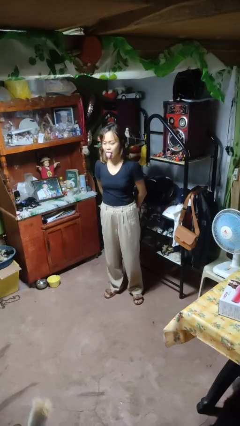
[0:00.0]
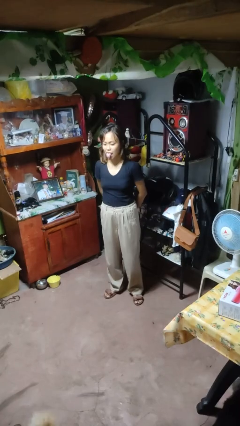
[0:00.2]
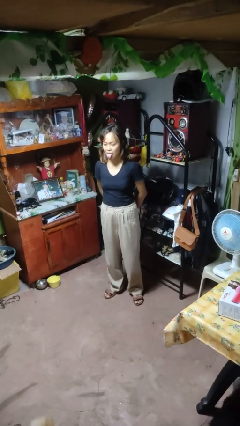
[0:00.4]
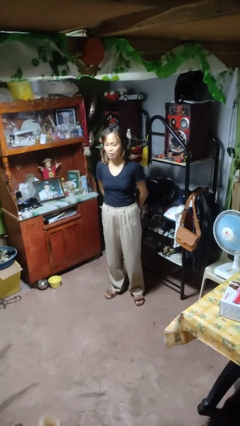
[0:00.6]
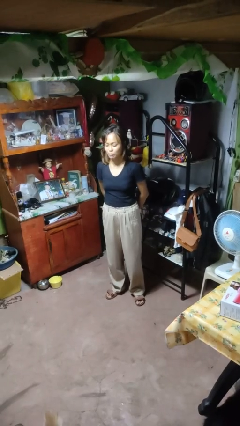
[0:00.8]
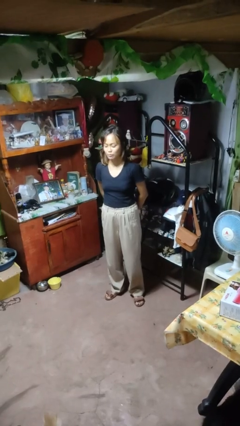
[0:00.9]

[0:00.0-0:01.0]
person sticks out tongue

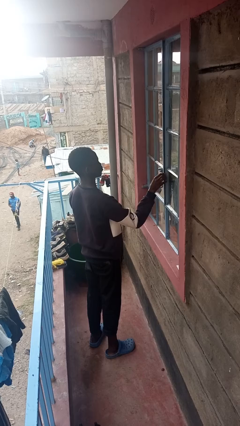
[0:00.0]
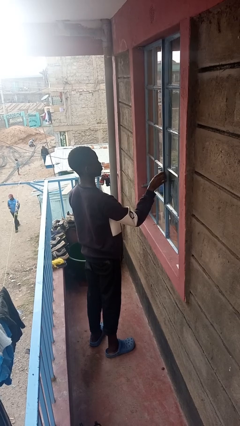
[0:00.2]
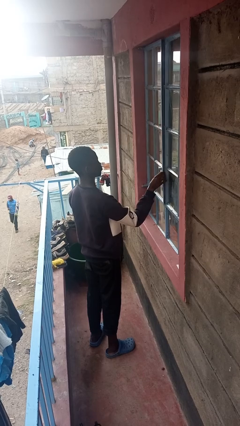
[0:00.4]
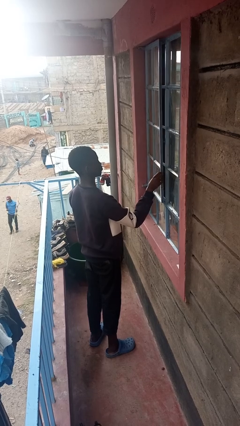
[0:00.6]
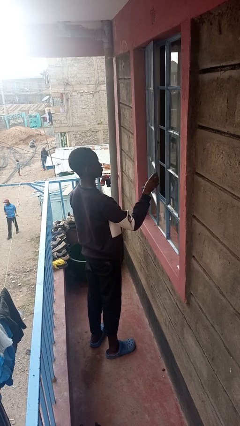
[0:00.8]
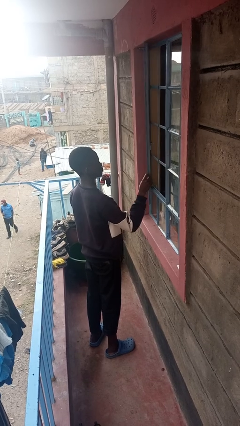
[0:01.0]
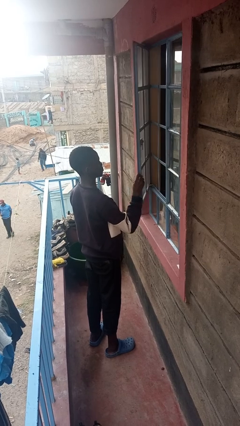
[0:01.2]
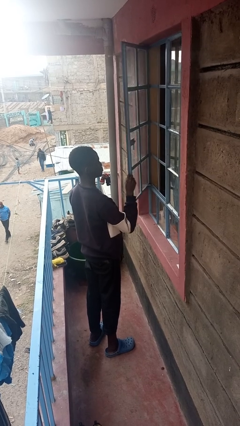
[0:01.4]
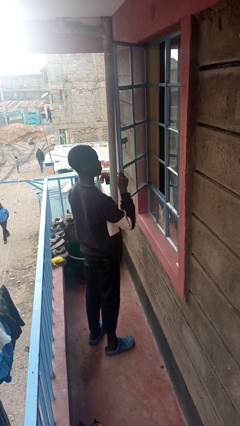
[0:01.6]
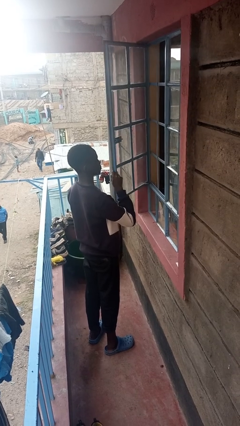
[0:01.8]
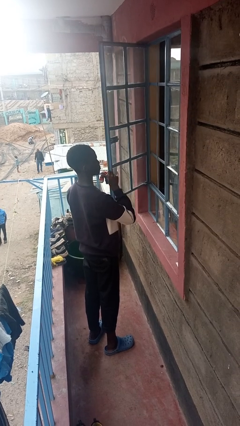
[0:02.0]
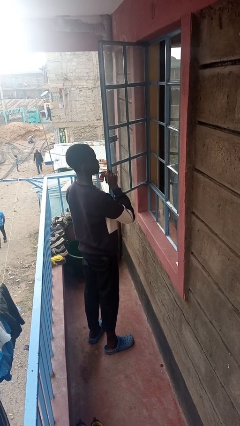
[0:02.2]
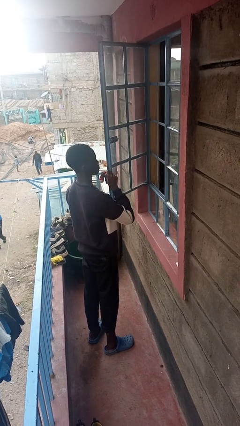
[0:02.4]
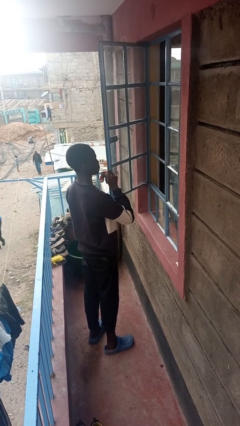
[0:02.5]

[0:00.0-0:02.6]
person opens home window

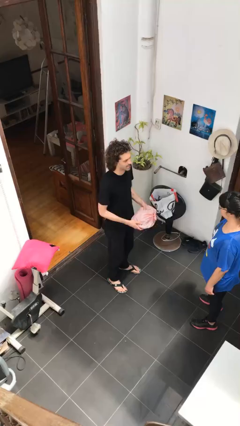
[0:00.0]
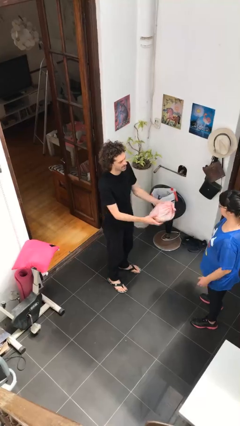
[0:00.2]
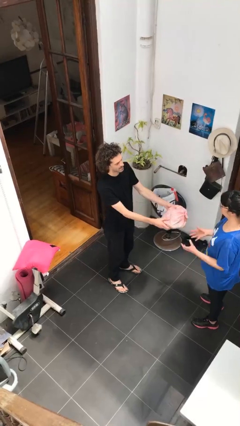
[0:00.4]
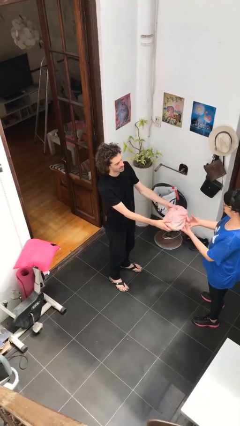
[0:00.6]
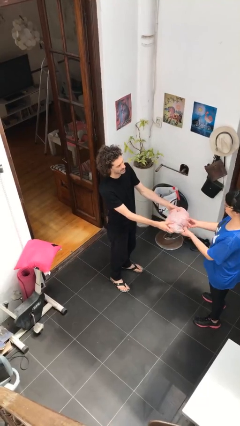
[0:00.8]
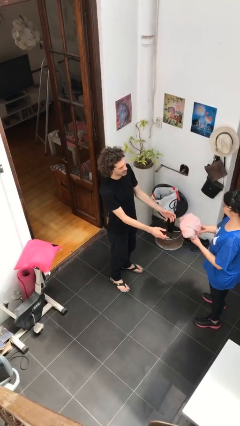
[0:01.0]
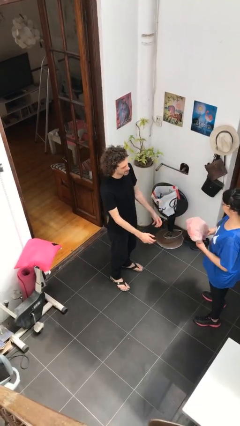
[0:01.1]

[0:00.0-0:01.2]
person transfers object to person

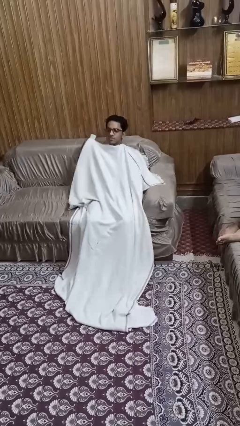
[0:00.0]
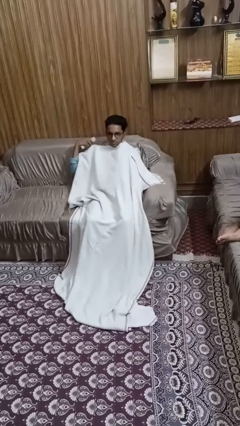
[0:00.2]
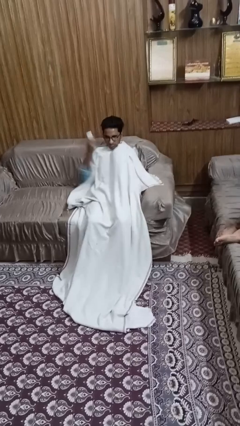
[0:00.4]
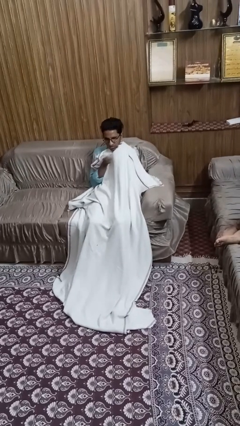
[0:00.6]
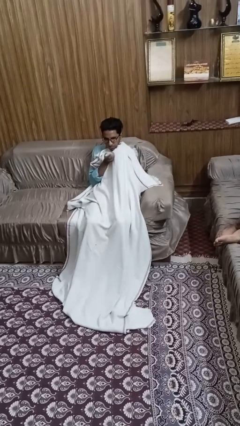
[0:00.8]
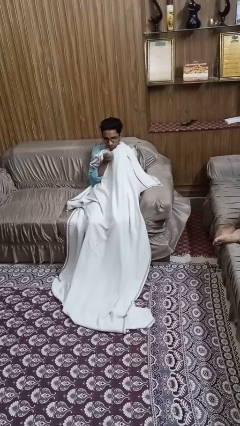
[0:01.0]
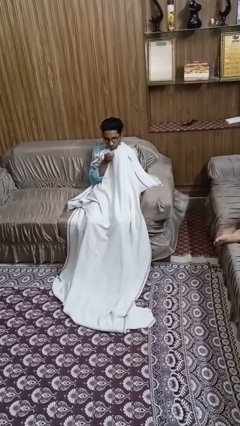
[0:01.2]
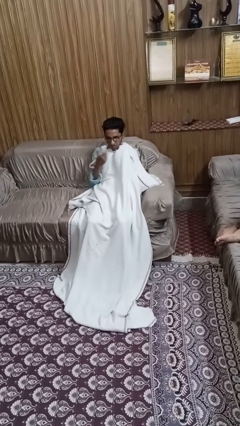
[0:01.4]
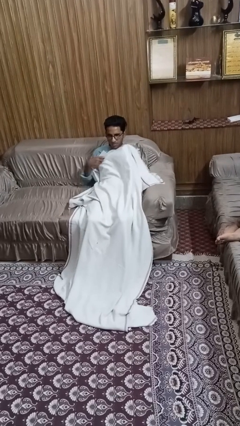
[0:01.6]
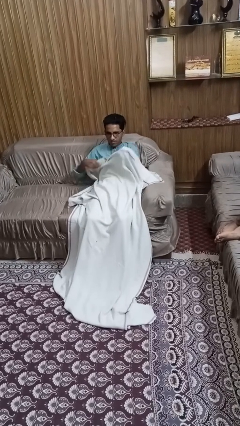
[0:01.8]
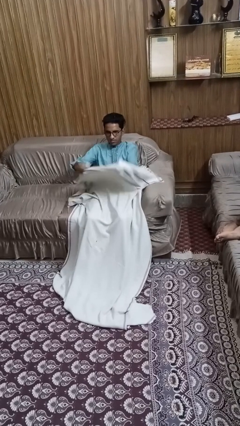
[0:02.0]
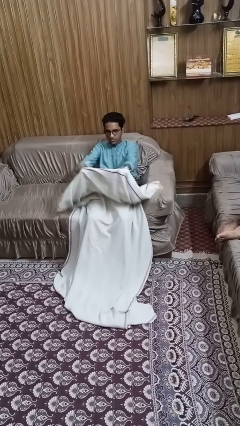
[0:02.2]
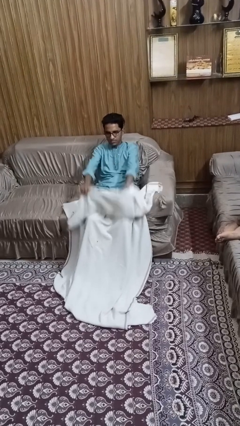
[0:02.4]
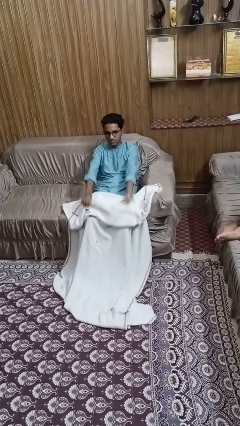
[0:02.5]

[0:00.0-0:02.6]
person covers with blanket

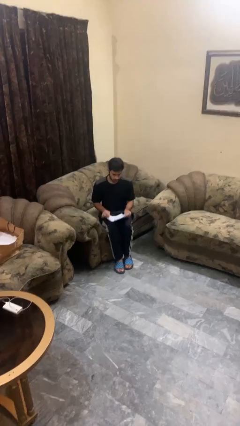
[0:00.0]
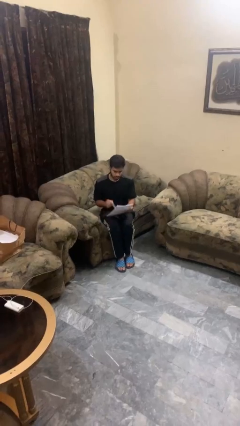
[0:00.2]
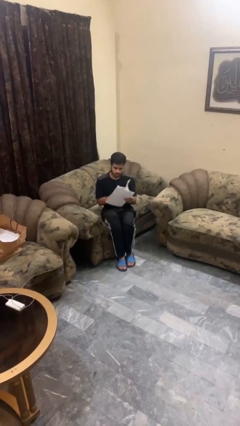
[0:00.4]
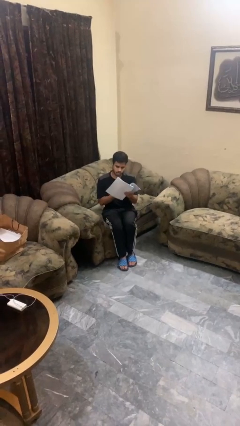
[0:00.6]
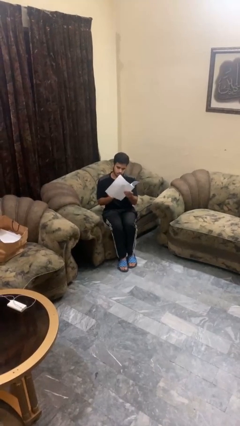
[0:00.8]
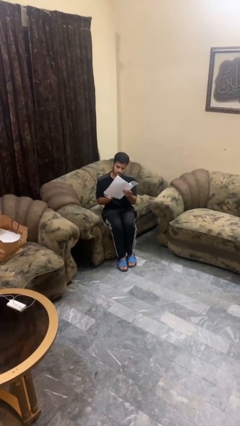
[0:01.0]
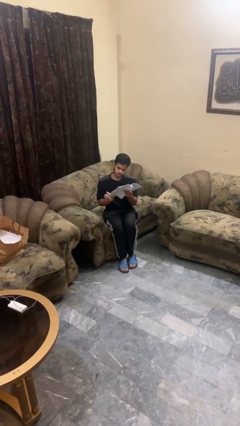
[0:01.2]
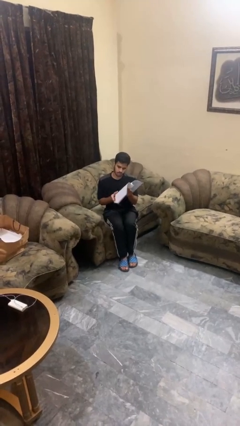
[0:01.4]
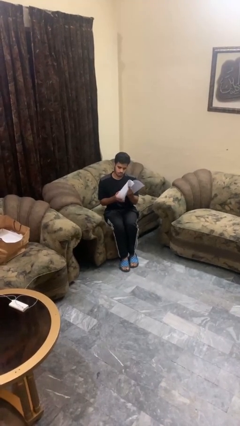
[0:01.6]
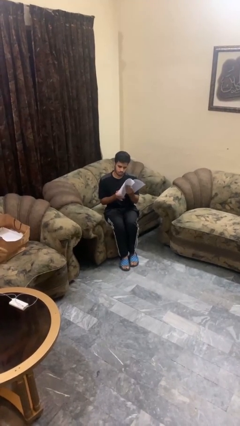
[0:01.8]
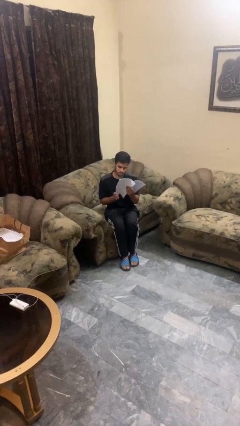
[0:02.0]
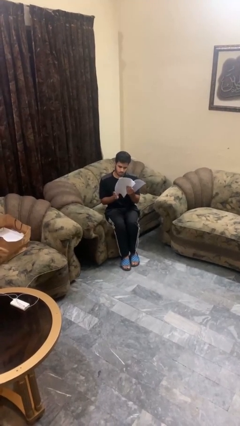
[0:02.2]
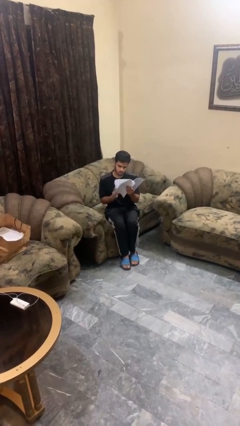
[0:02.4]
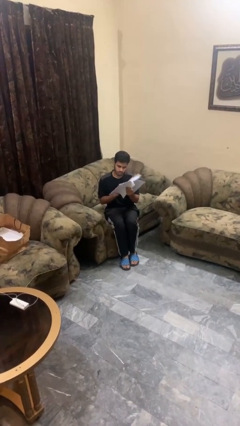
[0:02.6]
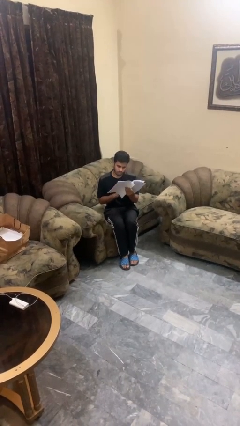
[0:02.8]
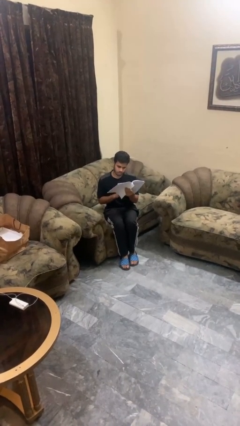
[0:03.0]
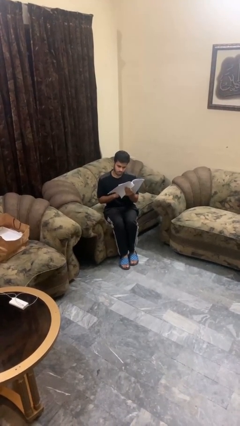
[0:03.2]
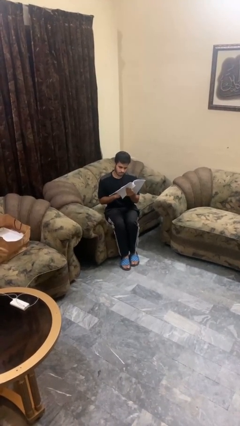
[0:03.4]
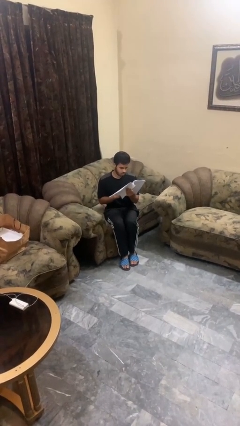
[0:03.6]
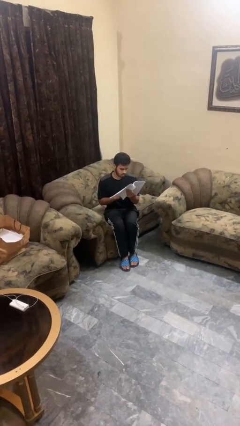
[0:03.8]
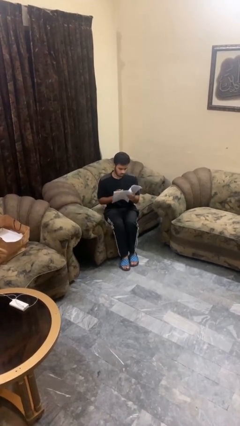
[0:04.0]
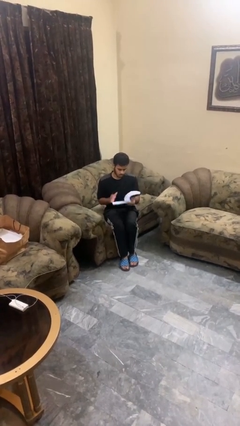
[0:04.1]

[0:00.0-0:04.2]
person reads magazine

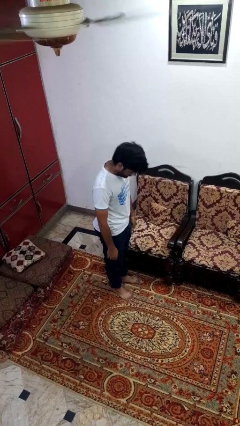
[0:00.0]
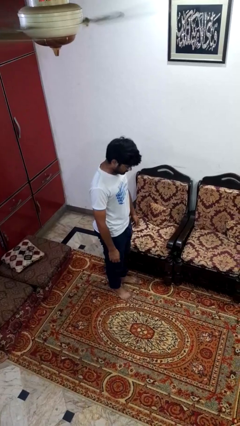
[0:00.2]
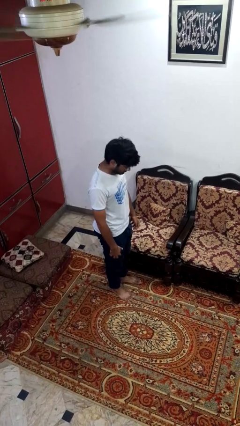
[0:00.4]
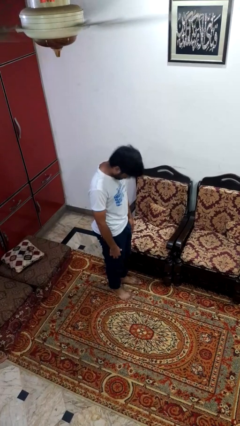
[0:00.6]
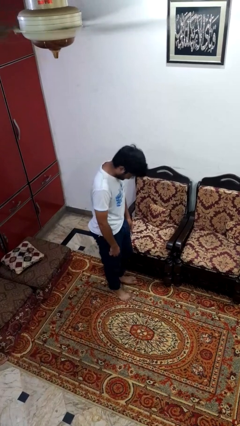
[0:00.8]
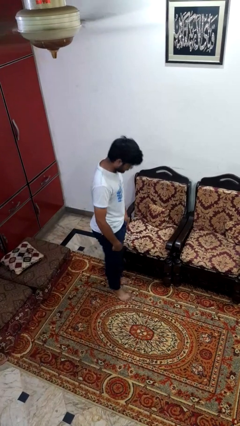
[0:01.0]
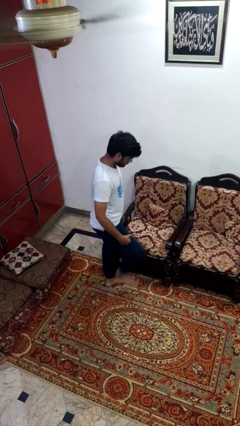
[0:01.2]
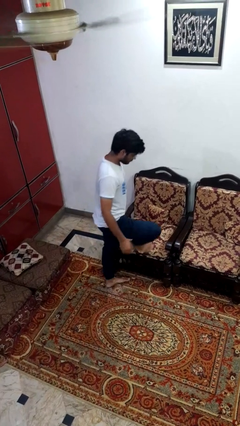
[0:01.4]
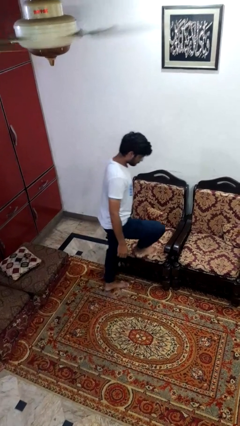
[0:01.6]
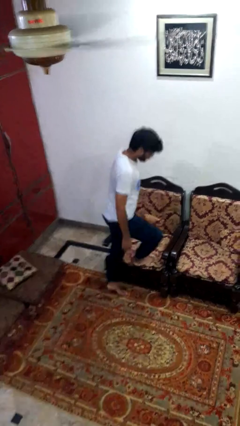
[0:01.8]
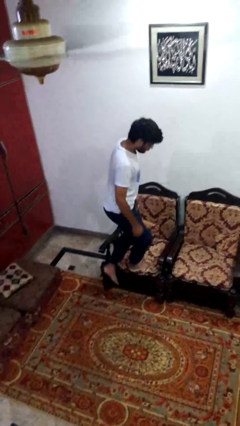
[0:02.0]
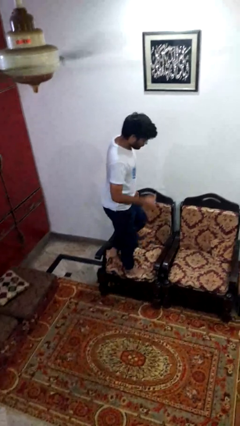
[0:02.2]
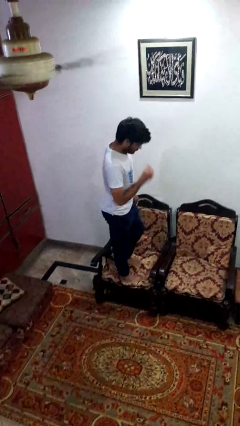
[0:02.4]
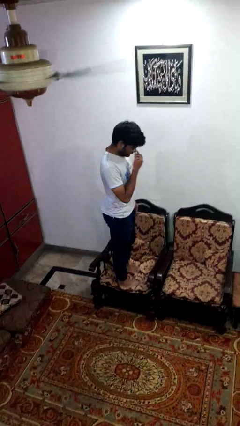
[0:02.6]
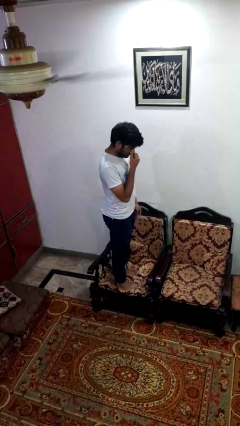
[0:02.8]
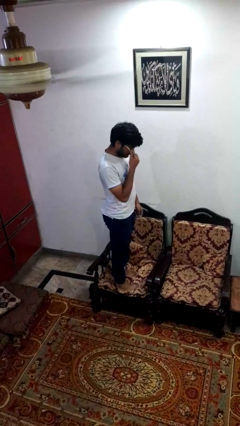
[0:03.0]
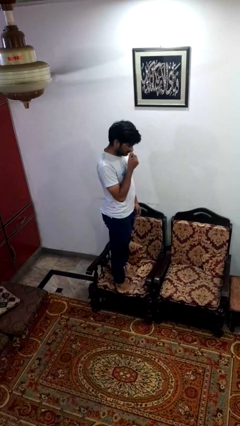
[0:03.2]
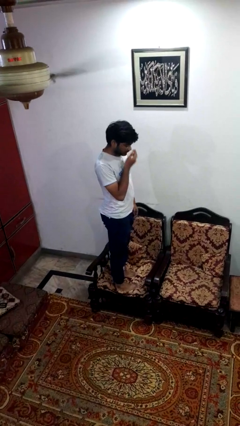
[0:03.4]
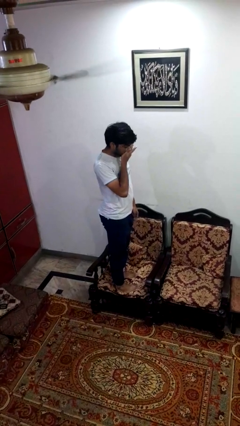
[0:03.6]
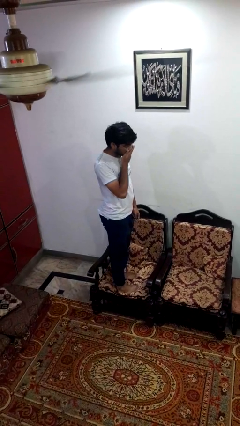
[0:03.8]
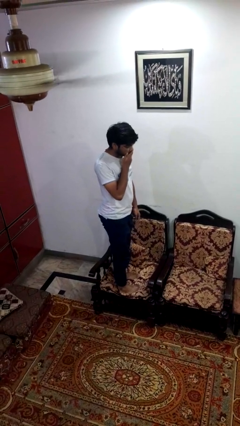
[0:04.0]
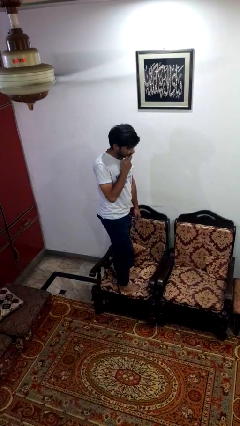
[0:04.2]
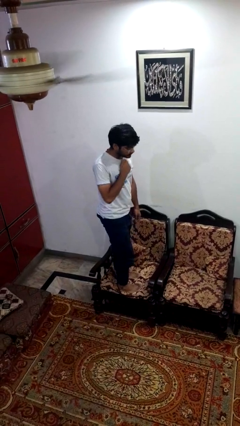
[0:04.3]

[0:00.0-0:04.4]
person climbs on couch

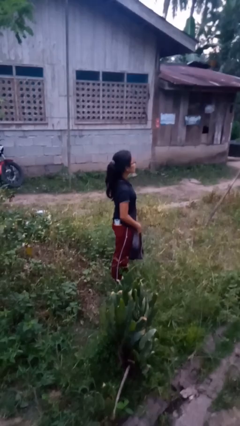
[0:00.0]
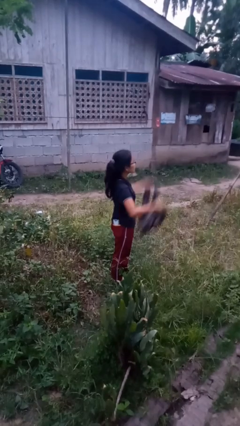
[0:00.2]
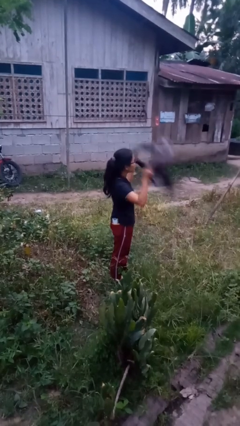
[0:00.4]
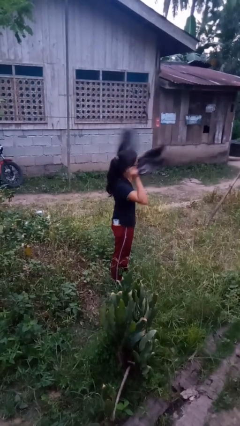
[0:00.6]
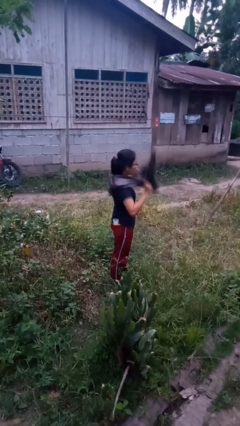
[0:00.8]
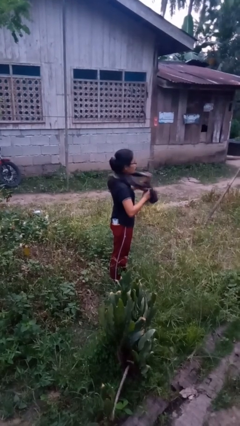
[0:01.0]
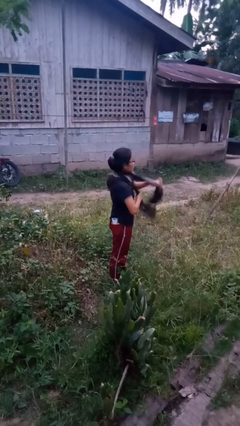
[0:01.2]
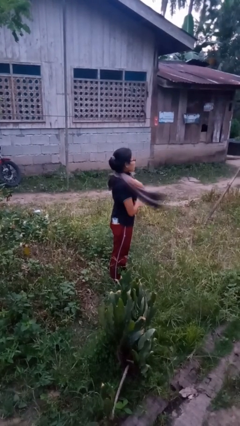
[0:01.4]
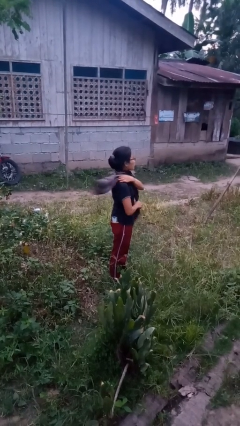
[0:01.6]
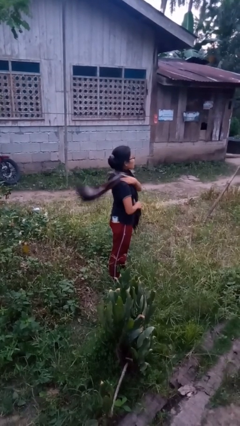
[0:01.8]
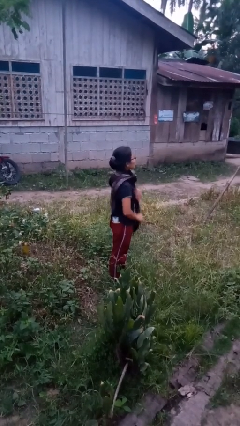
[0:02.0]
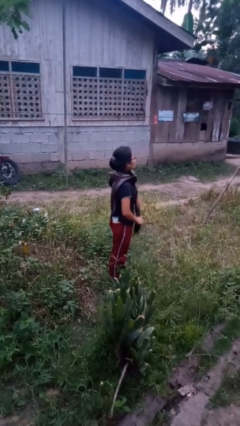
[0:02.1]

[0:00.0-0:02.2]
person puts on scarf
